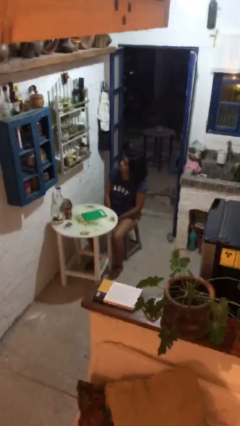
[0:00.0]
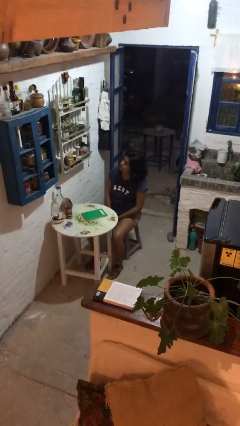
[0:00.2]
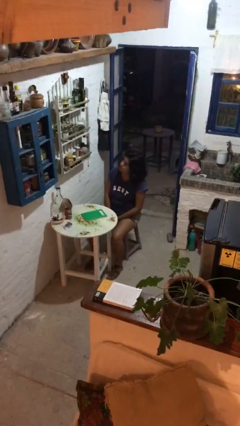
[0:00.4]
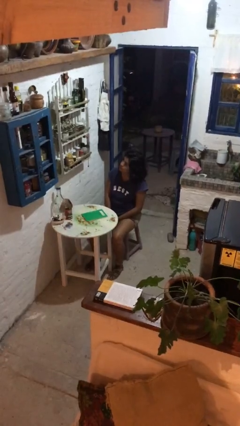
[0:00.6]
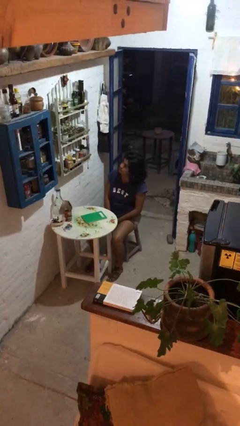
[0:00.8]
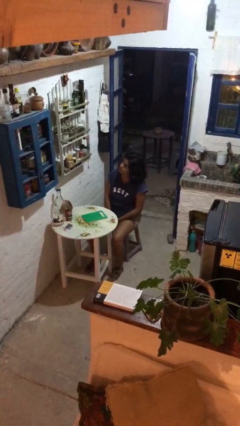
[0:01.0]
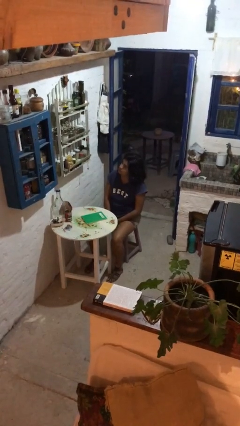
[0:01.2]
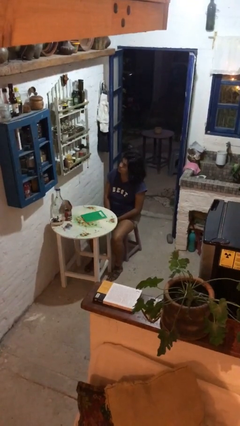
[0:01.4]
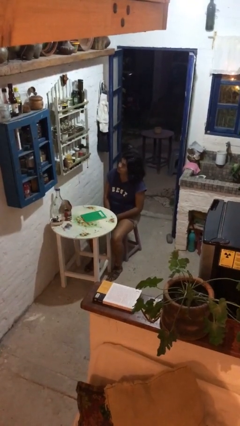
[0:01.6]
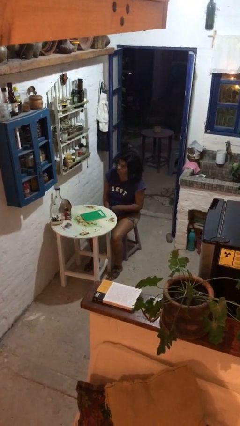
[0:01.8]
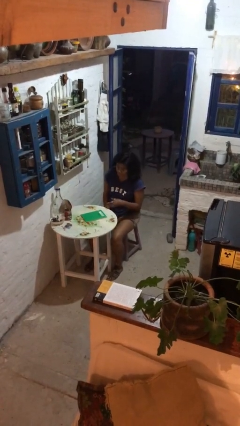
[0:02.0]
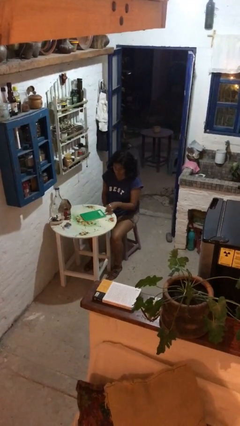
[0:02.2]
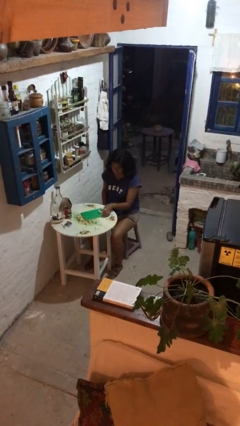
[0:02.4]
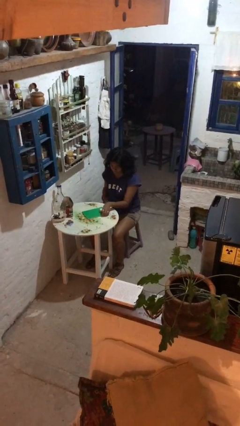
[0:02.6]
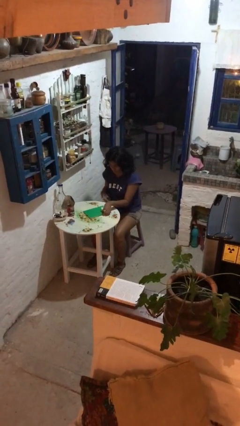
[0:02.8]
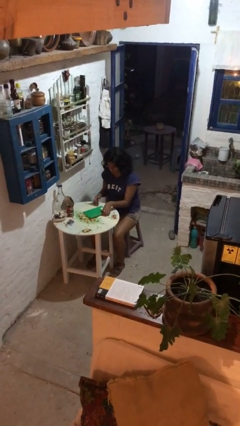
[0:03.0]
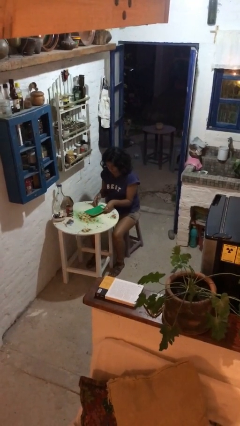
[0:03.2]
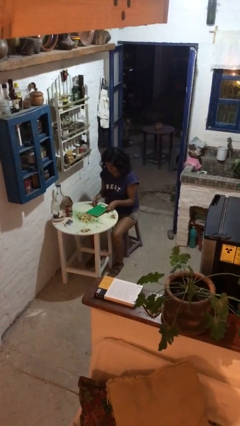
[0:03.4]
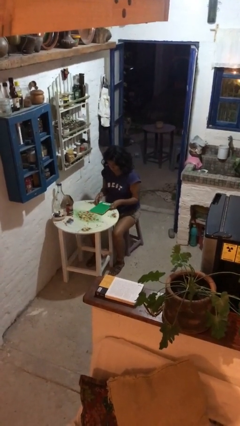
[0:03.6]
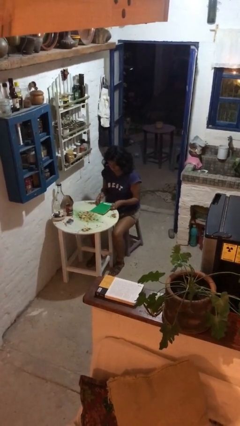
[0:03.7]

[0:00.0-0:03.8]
person picks up object from table

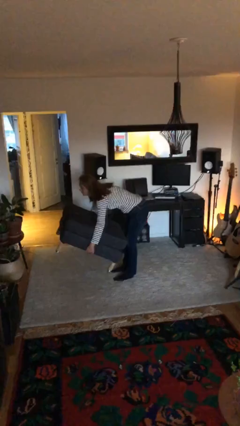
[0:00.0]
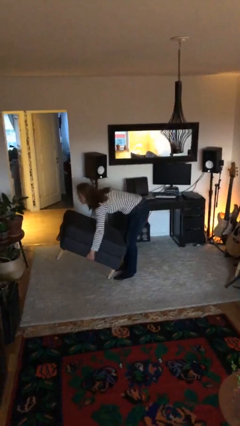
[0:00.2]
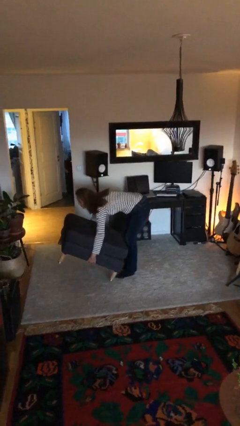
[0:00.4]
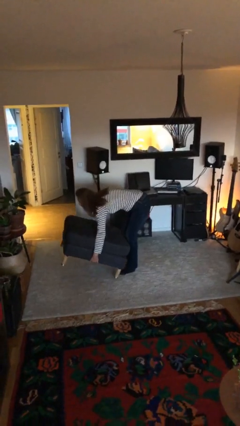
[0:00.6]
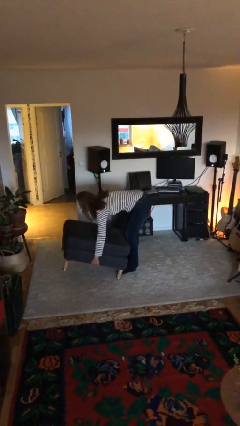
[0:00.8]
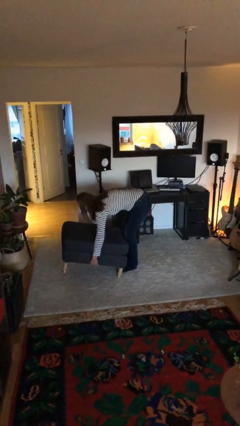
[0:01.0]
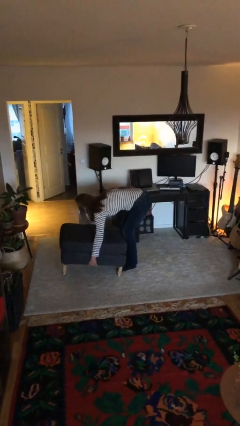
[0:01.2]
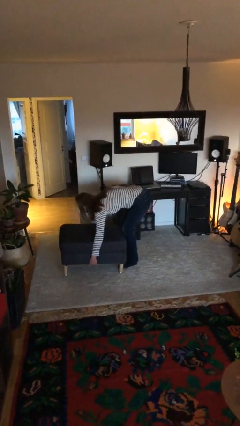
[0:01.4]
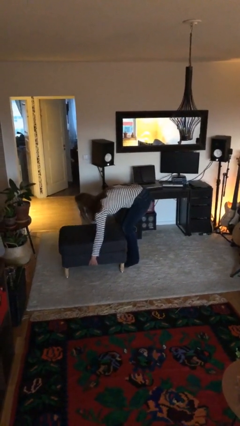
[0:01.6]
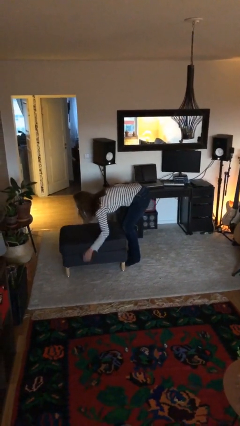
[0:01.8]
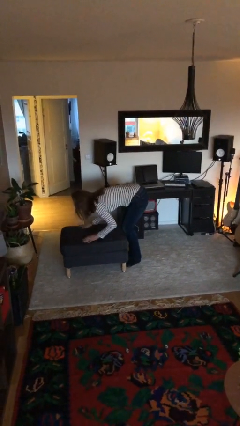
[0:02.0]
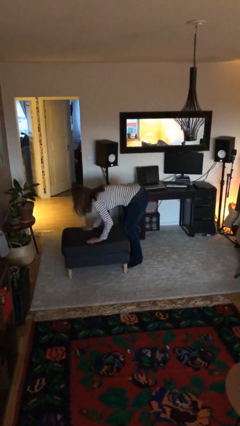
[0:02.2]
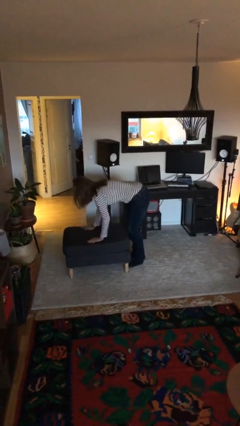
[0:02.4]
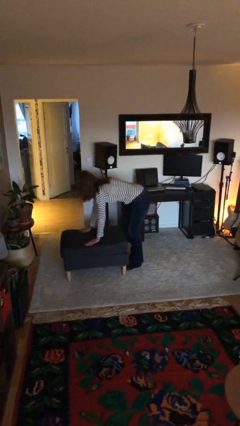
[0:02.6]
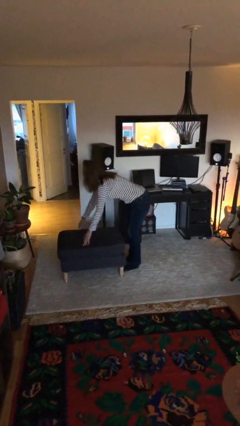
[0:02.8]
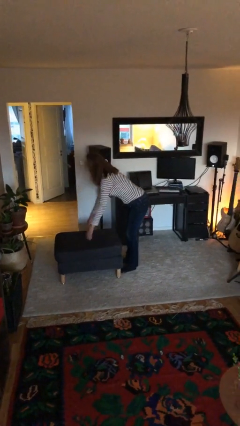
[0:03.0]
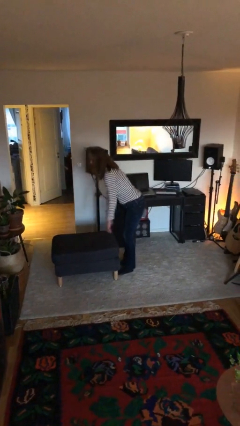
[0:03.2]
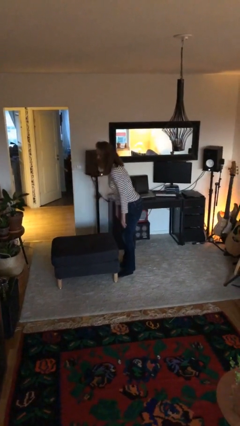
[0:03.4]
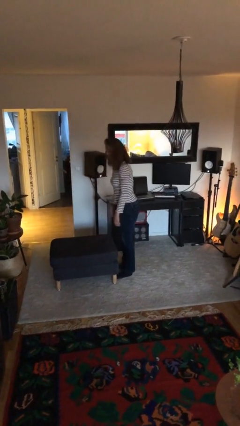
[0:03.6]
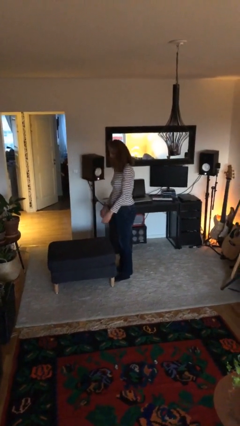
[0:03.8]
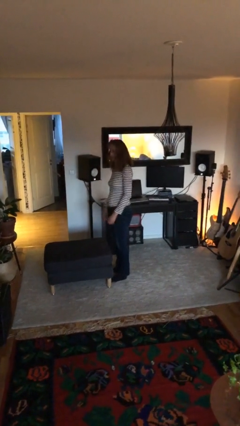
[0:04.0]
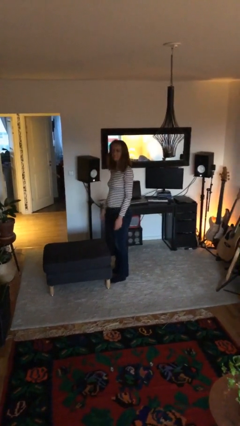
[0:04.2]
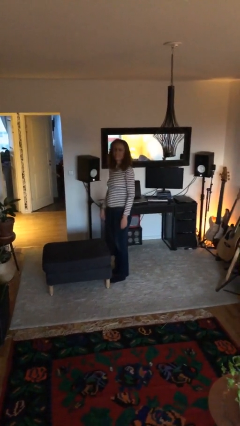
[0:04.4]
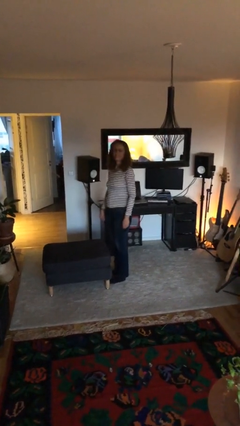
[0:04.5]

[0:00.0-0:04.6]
person puts down object on floor

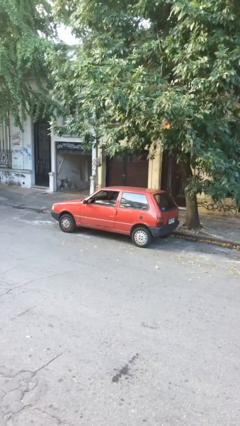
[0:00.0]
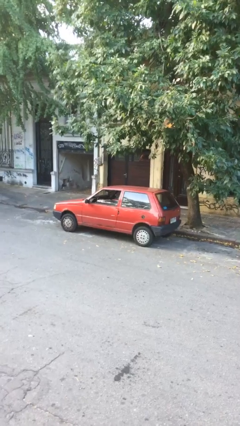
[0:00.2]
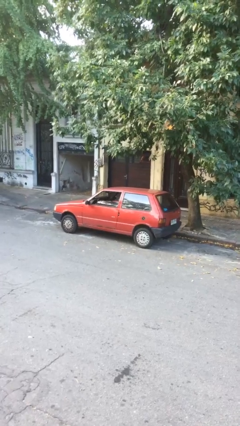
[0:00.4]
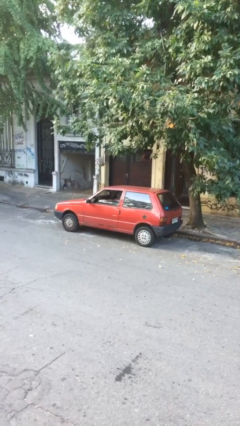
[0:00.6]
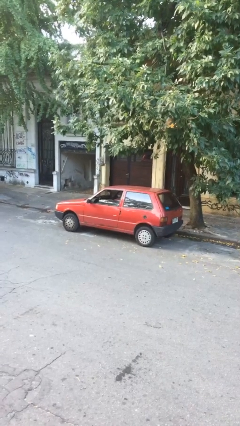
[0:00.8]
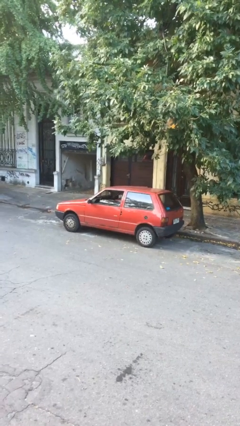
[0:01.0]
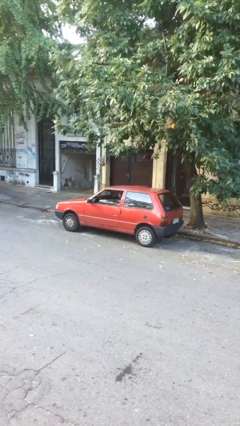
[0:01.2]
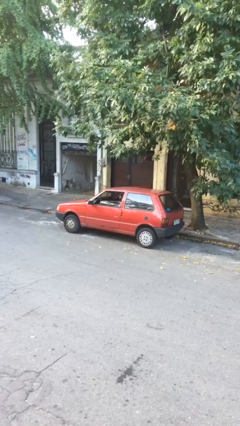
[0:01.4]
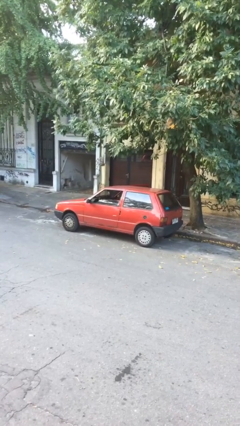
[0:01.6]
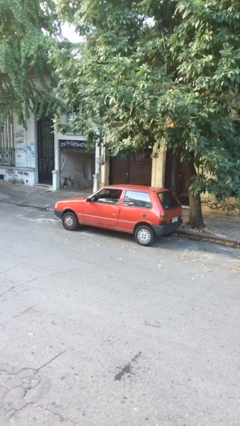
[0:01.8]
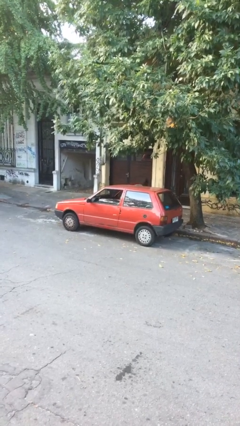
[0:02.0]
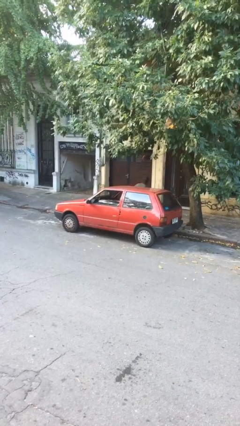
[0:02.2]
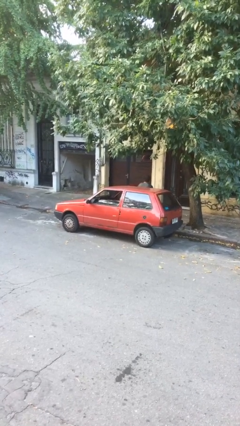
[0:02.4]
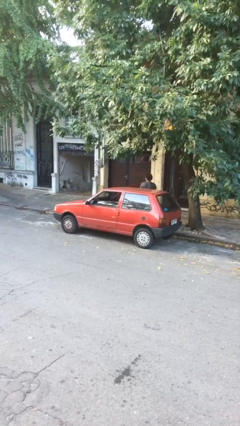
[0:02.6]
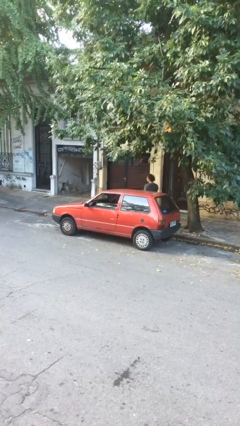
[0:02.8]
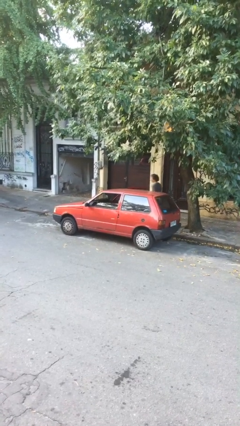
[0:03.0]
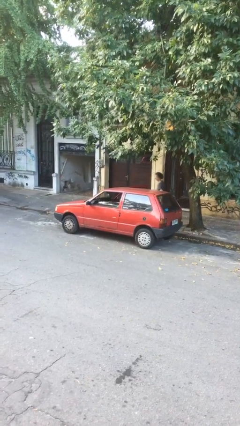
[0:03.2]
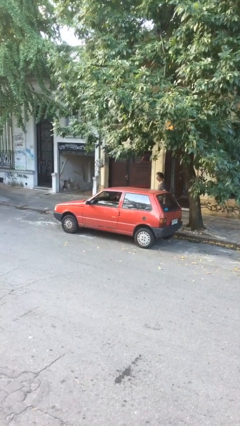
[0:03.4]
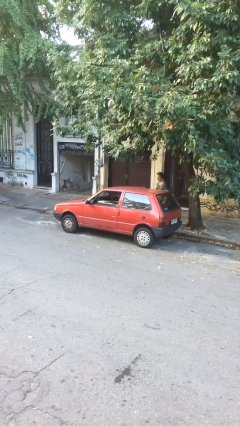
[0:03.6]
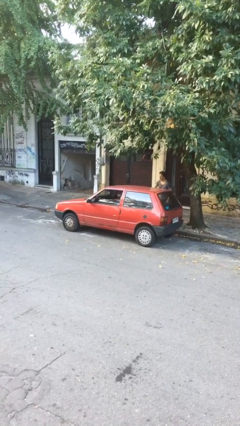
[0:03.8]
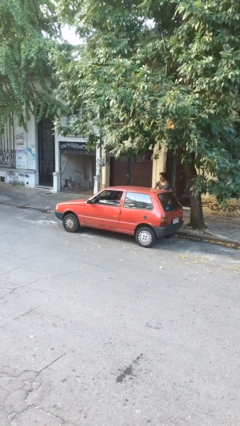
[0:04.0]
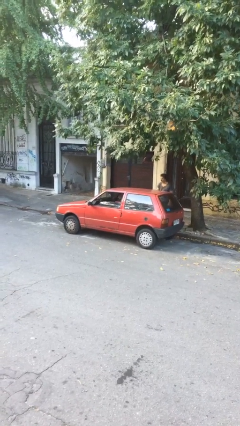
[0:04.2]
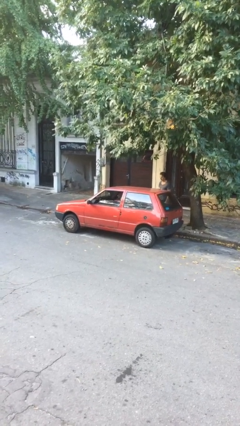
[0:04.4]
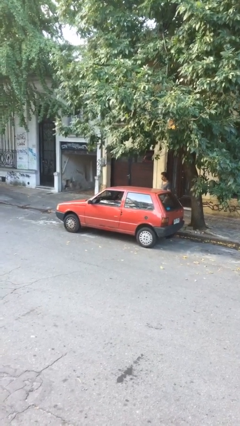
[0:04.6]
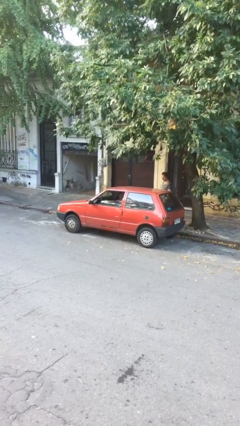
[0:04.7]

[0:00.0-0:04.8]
car drops off person

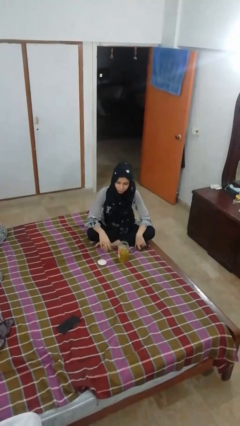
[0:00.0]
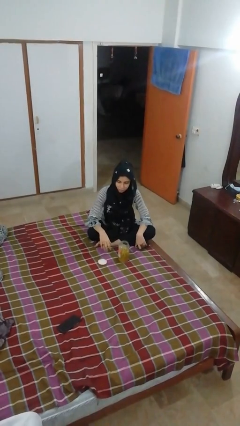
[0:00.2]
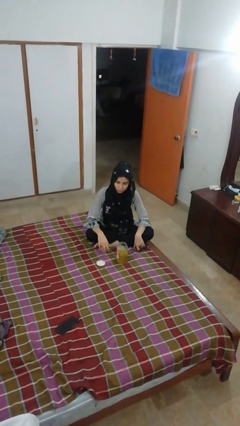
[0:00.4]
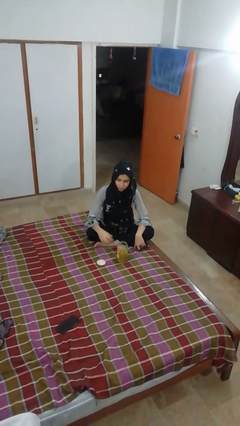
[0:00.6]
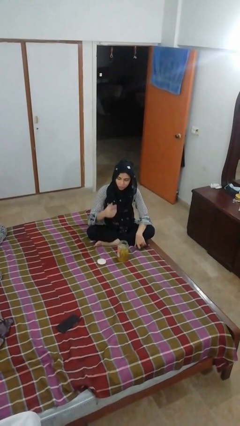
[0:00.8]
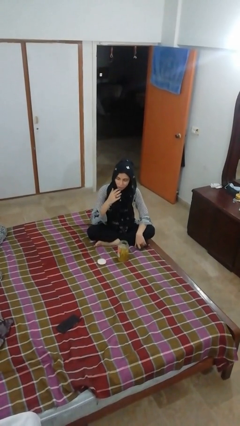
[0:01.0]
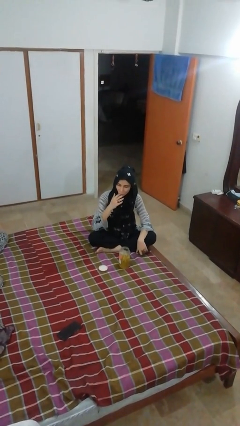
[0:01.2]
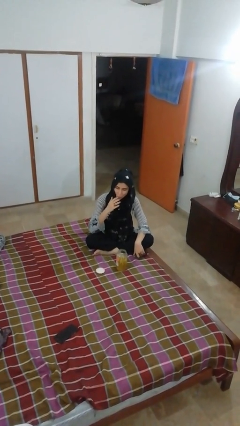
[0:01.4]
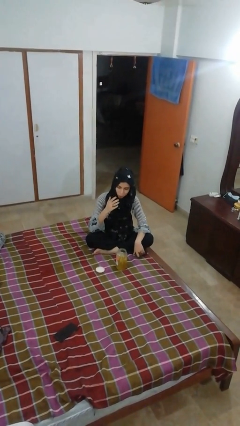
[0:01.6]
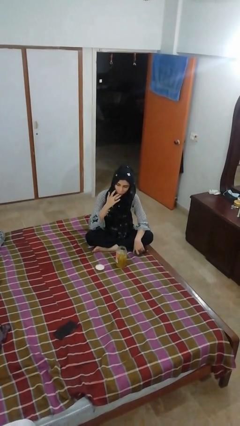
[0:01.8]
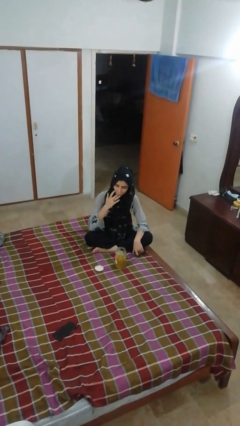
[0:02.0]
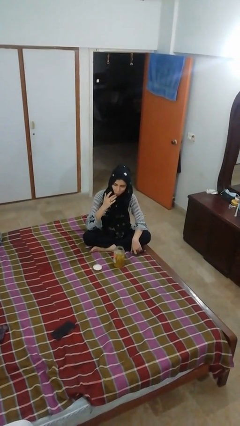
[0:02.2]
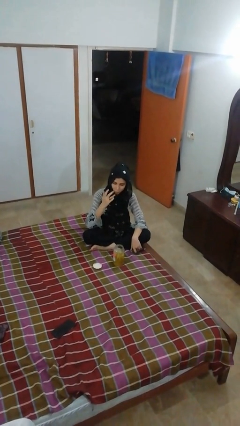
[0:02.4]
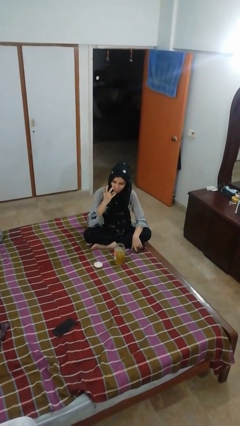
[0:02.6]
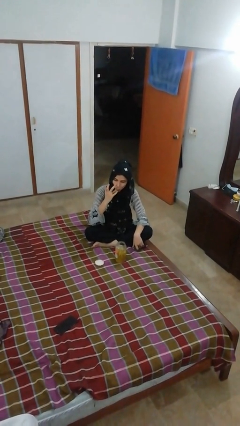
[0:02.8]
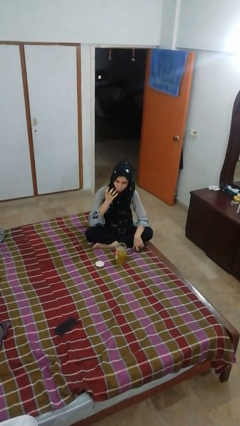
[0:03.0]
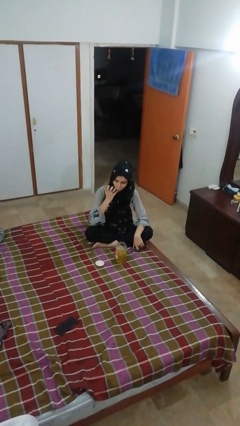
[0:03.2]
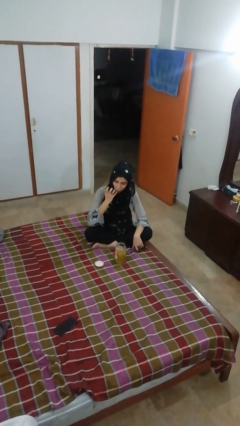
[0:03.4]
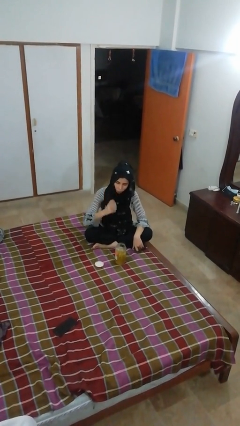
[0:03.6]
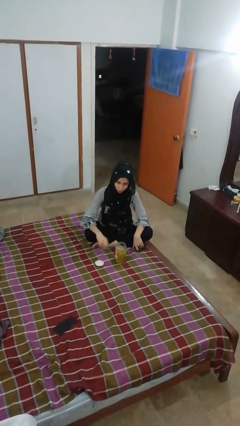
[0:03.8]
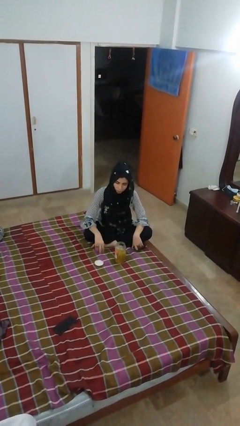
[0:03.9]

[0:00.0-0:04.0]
person licks fingers

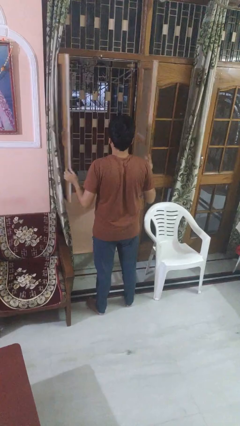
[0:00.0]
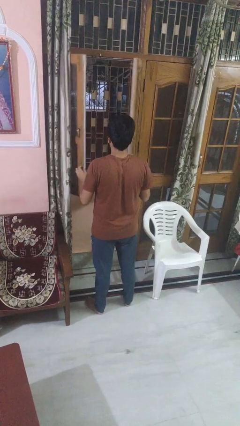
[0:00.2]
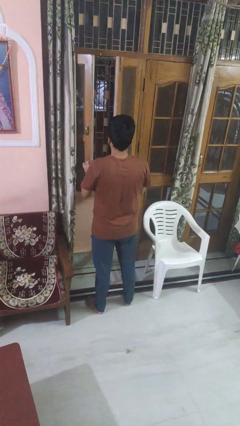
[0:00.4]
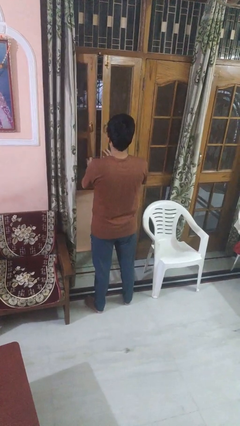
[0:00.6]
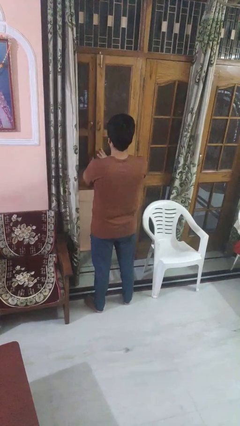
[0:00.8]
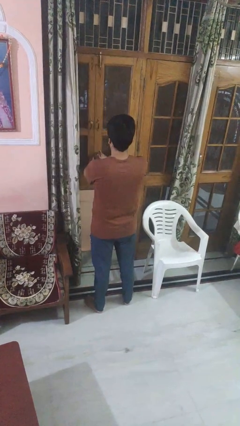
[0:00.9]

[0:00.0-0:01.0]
person closes home window
